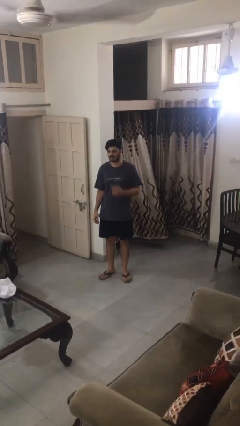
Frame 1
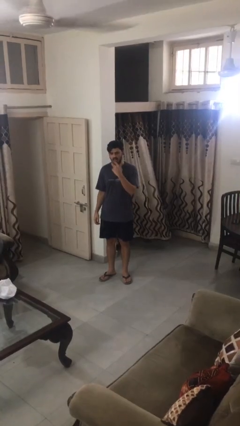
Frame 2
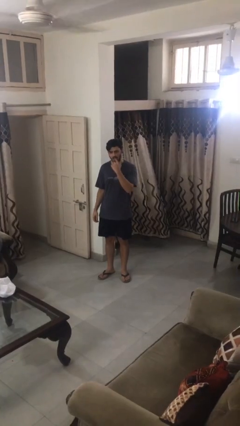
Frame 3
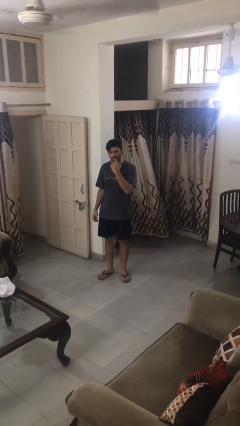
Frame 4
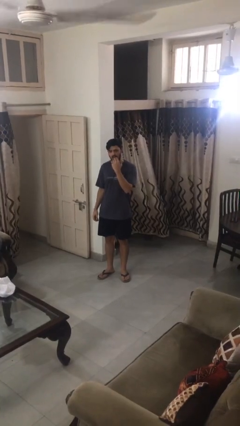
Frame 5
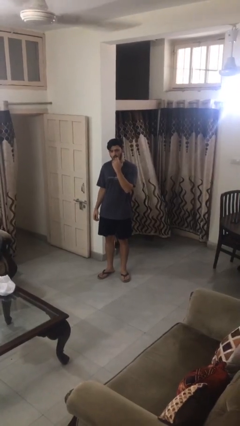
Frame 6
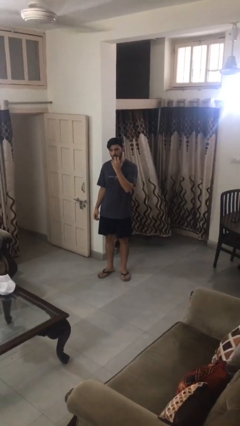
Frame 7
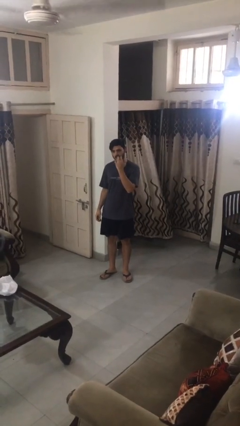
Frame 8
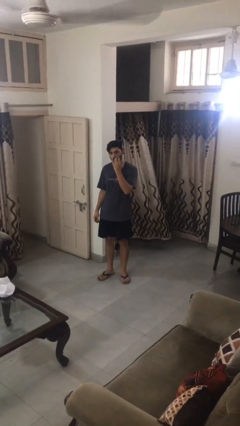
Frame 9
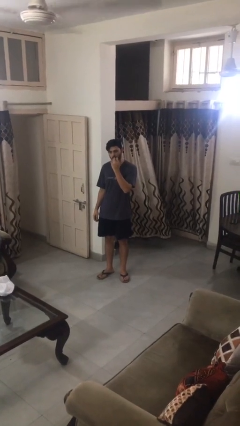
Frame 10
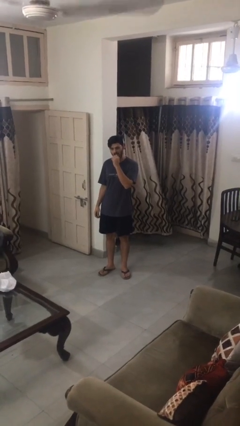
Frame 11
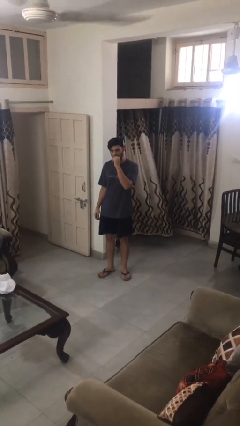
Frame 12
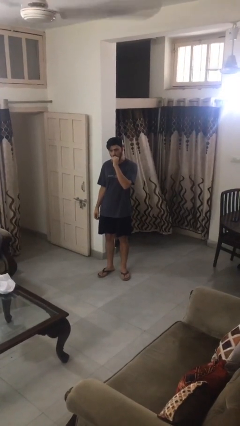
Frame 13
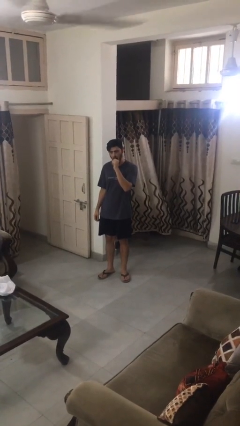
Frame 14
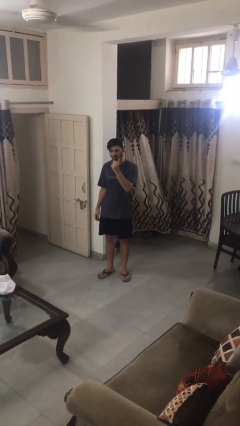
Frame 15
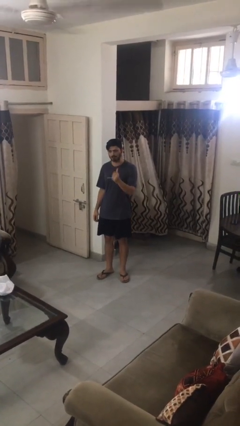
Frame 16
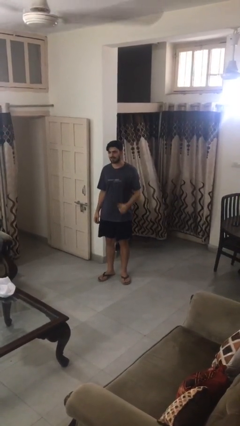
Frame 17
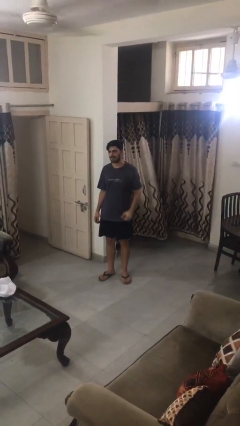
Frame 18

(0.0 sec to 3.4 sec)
person licks fingers

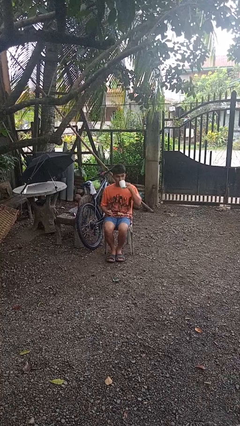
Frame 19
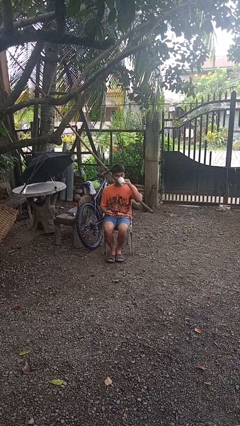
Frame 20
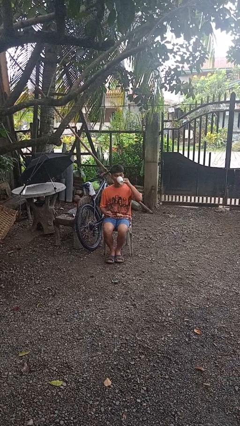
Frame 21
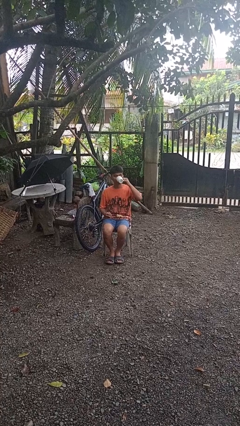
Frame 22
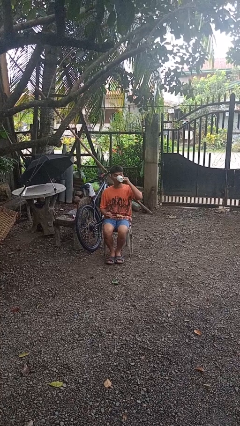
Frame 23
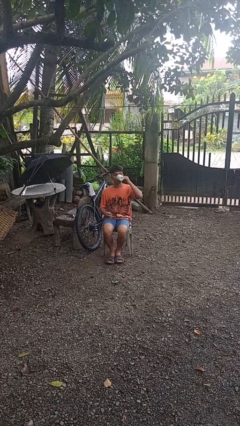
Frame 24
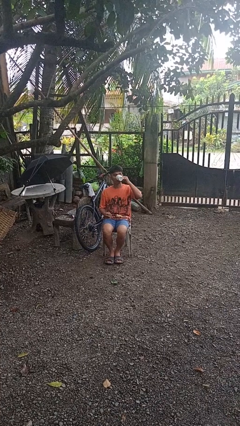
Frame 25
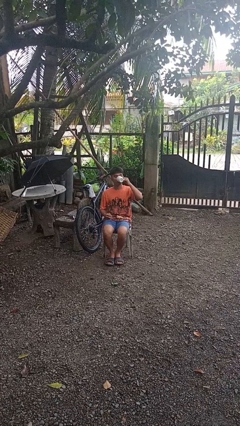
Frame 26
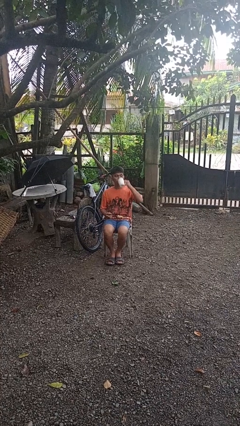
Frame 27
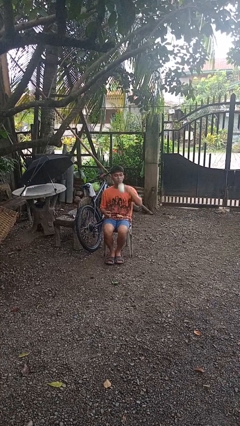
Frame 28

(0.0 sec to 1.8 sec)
person drinks from mug

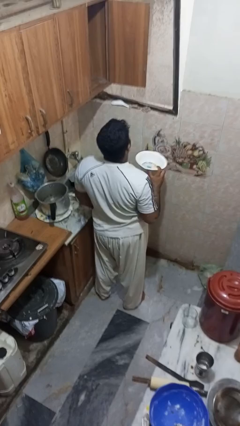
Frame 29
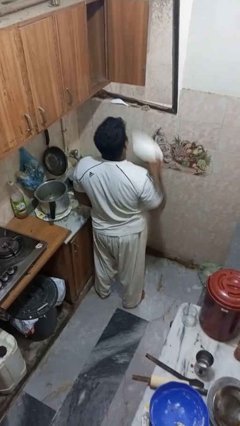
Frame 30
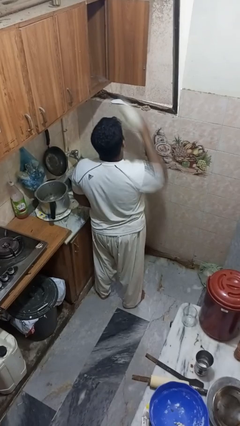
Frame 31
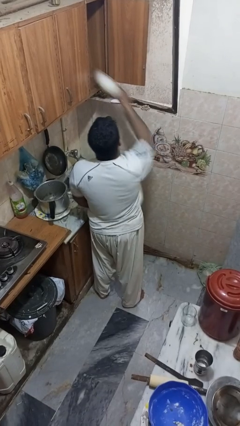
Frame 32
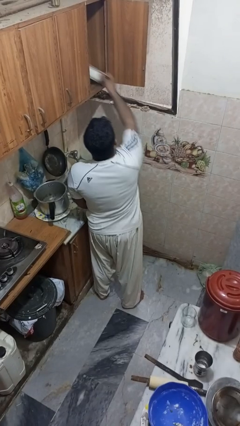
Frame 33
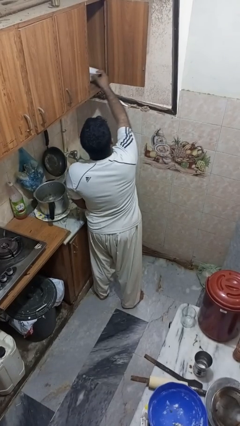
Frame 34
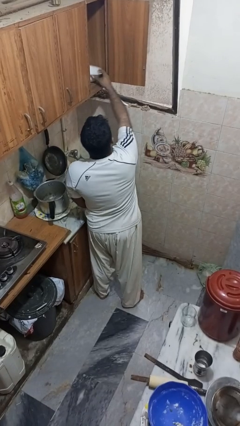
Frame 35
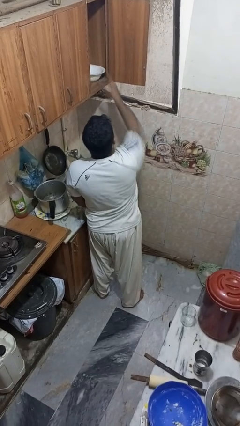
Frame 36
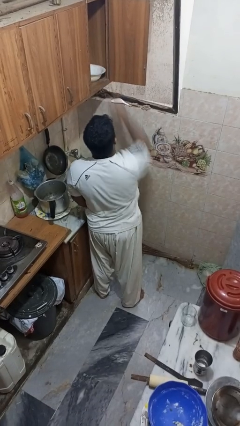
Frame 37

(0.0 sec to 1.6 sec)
person puts object in cabinet

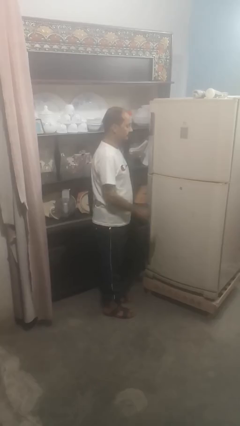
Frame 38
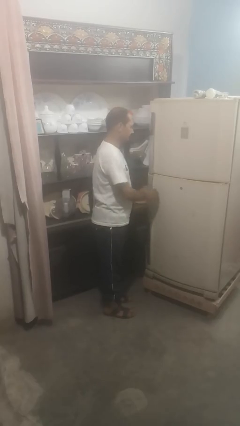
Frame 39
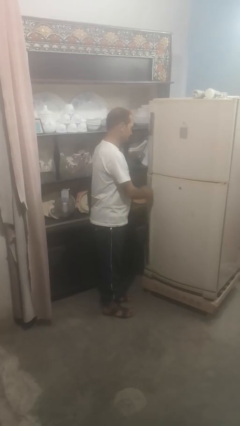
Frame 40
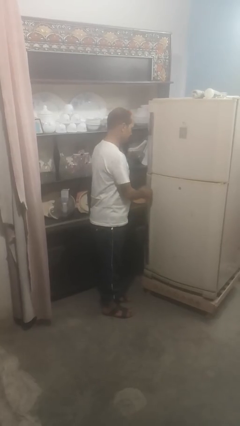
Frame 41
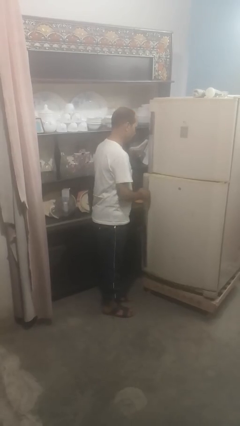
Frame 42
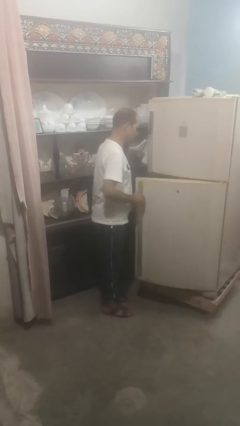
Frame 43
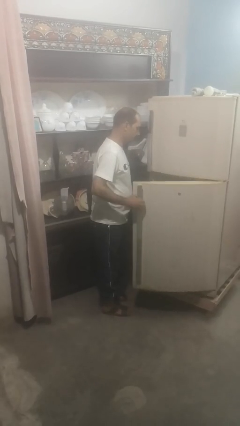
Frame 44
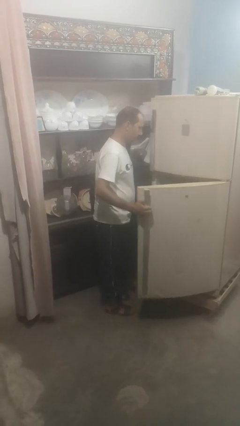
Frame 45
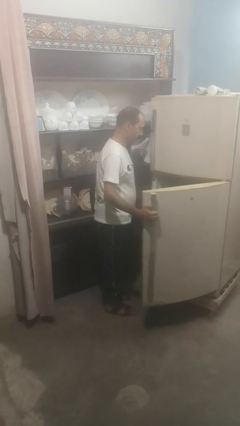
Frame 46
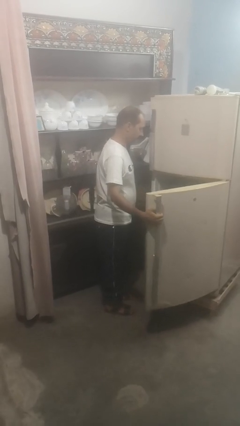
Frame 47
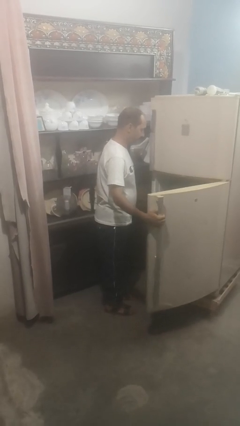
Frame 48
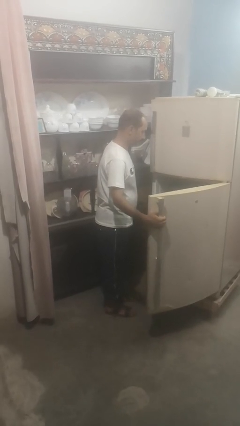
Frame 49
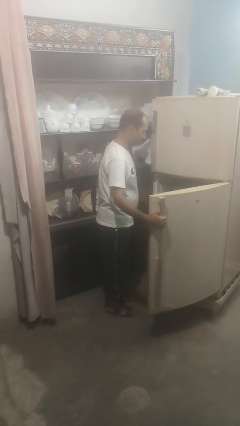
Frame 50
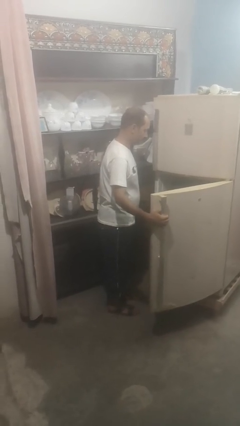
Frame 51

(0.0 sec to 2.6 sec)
person opens refrigerator

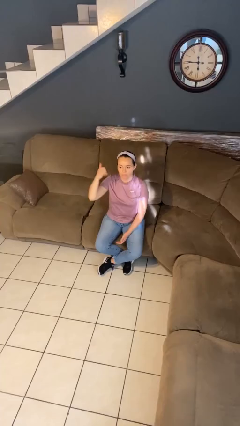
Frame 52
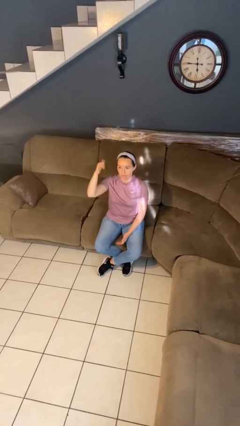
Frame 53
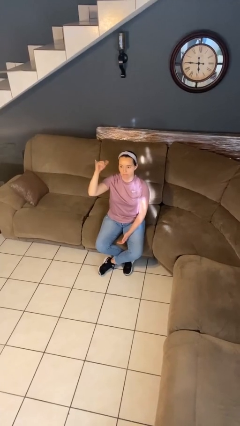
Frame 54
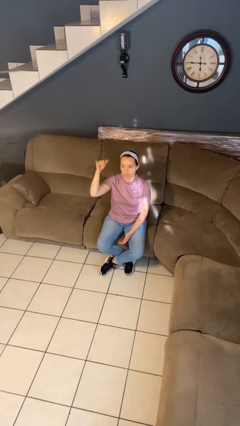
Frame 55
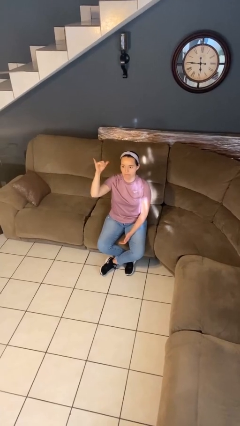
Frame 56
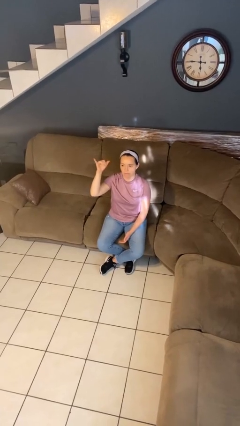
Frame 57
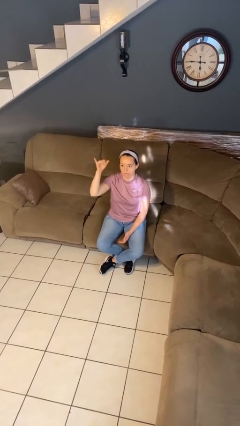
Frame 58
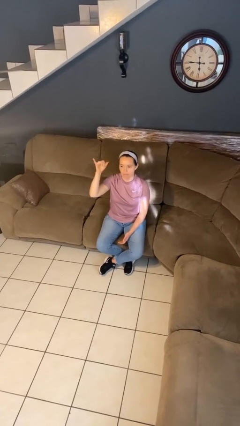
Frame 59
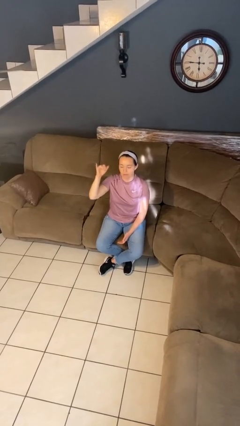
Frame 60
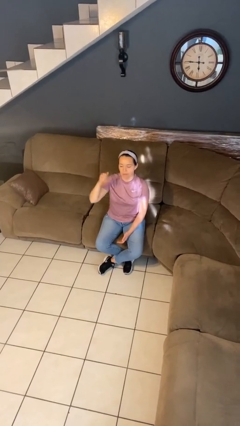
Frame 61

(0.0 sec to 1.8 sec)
person gestures hang loose

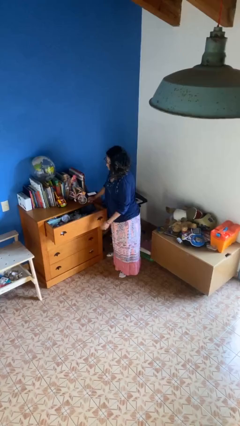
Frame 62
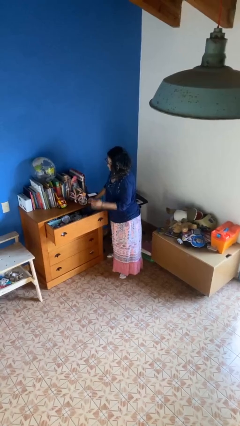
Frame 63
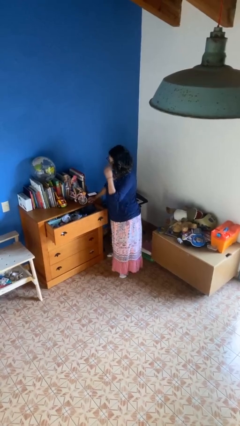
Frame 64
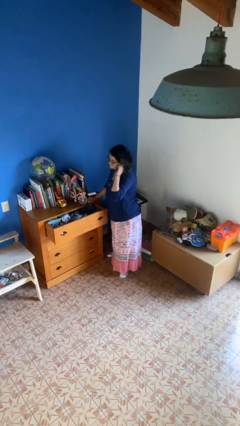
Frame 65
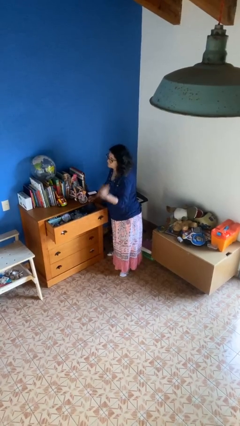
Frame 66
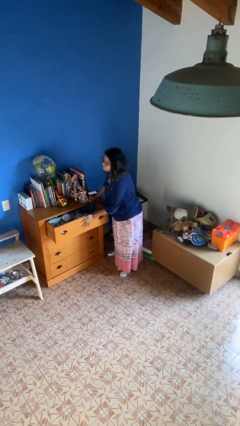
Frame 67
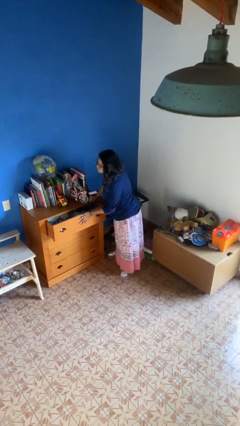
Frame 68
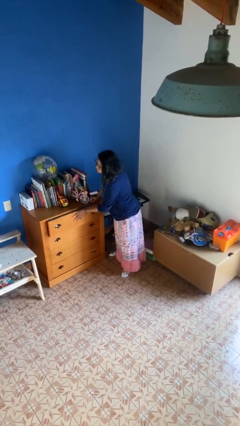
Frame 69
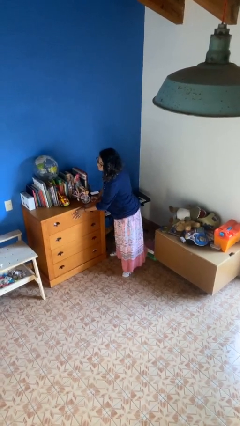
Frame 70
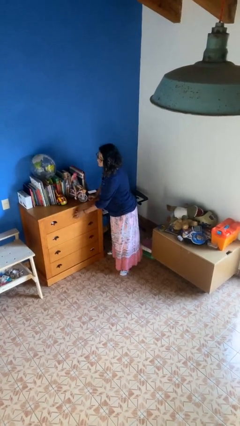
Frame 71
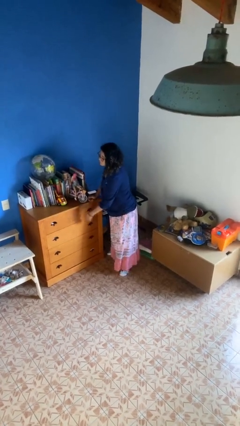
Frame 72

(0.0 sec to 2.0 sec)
person closes dresser drawer

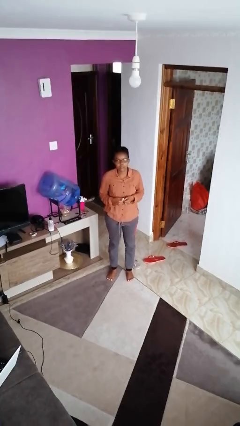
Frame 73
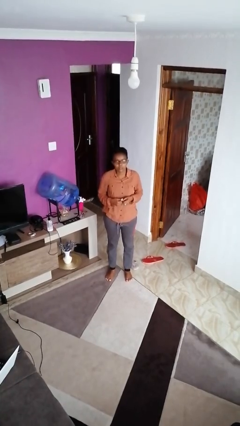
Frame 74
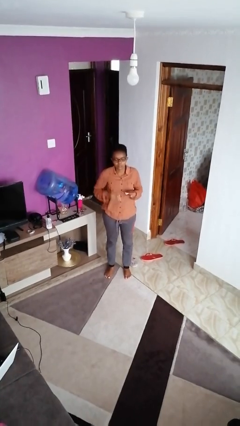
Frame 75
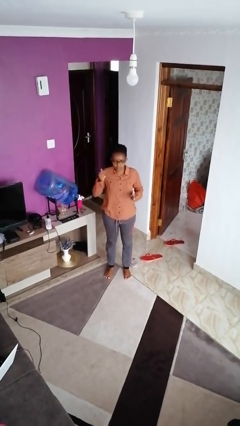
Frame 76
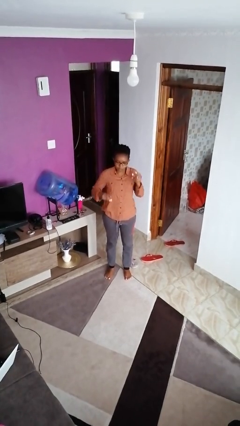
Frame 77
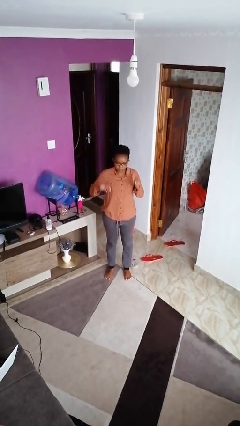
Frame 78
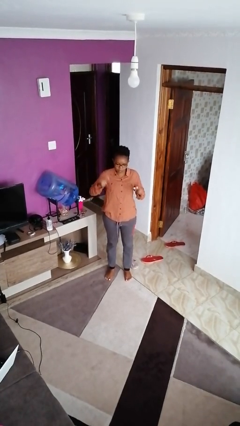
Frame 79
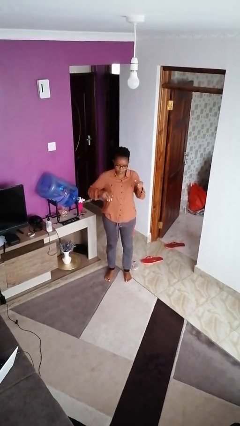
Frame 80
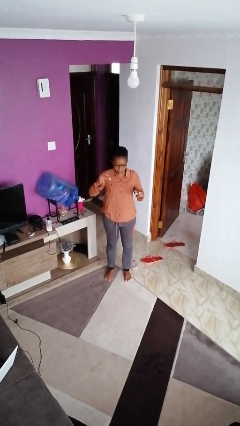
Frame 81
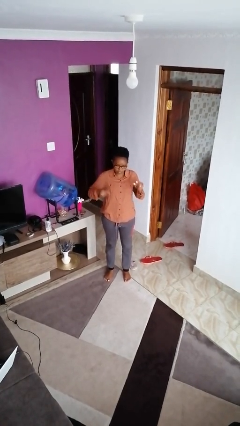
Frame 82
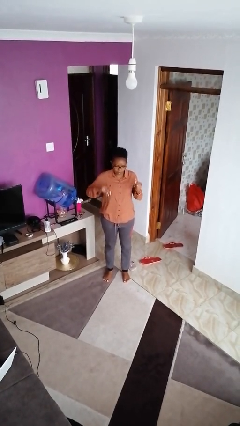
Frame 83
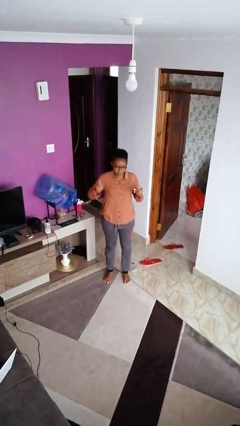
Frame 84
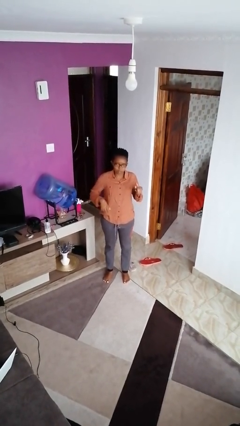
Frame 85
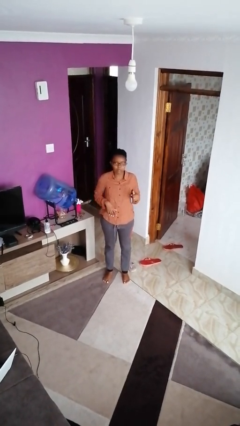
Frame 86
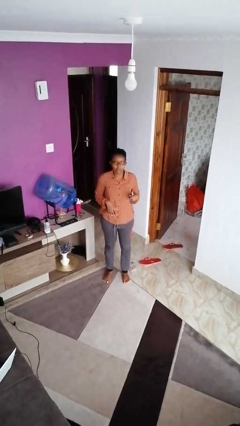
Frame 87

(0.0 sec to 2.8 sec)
person snaps fingers

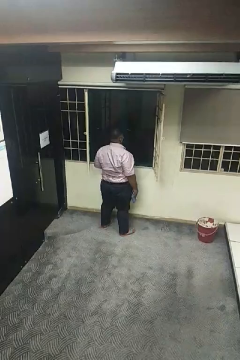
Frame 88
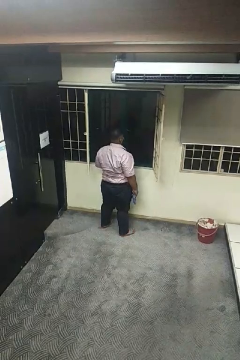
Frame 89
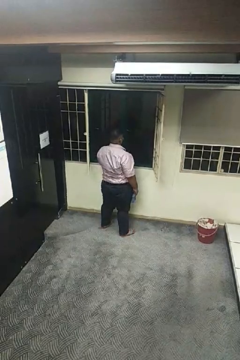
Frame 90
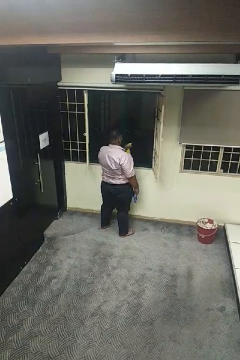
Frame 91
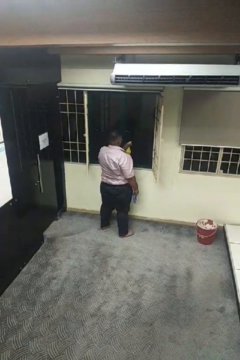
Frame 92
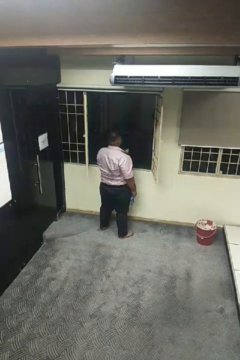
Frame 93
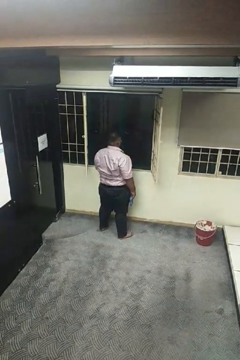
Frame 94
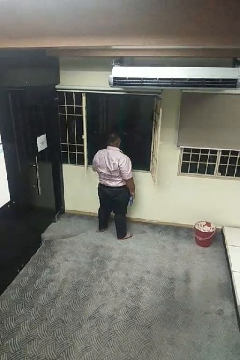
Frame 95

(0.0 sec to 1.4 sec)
person sprays from bottle
